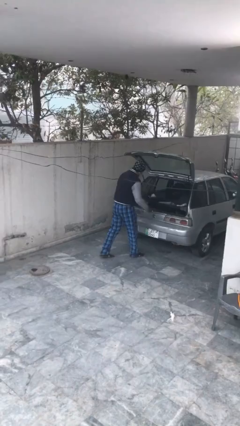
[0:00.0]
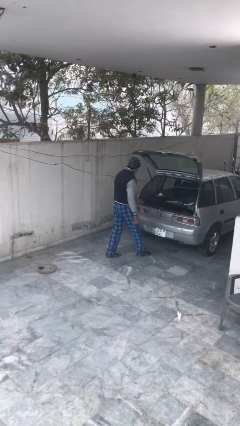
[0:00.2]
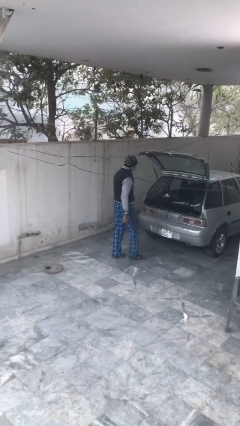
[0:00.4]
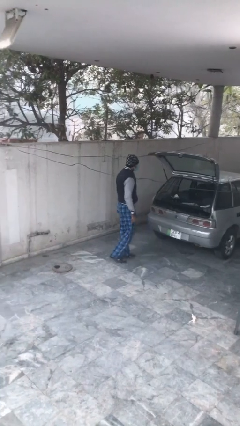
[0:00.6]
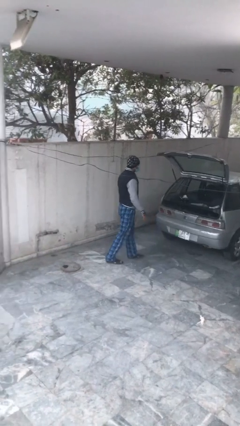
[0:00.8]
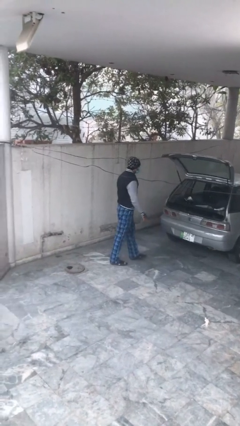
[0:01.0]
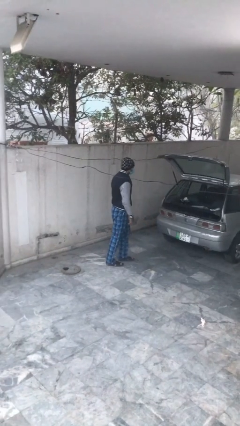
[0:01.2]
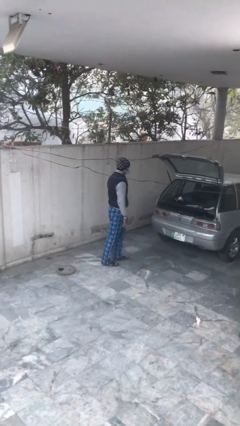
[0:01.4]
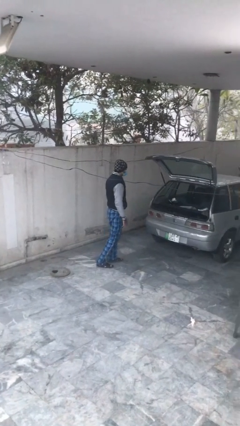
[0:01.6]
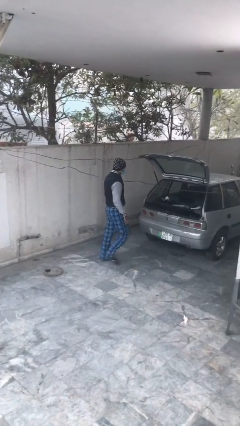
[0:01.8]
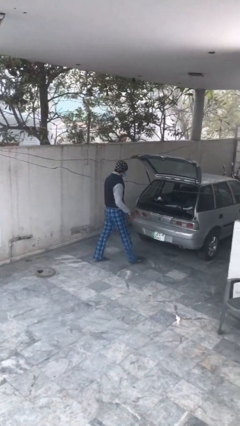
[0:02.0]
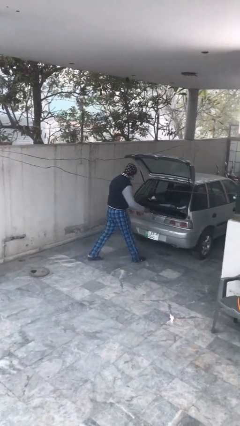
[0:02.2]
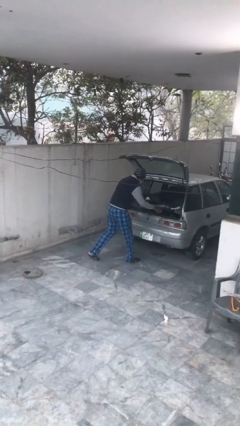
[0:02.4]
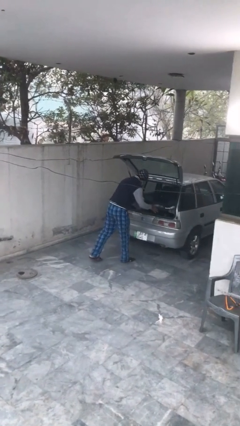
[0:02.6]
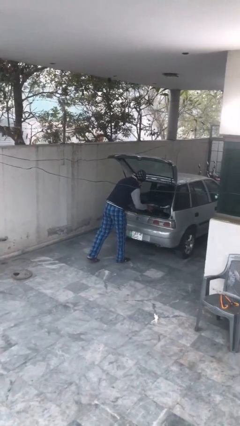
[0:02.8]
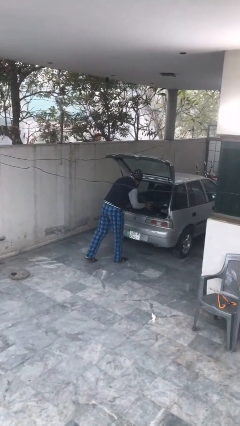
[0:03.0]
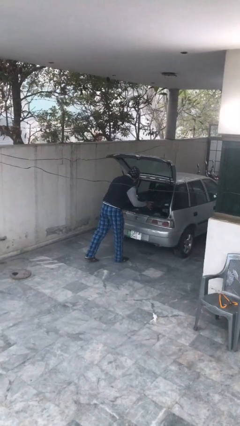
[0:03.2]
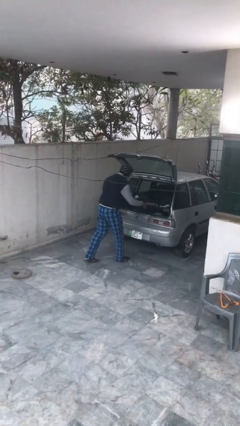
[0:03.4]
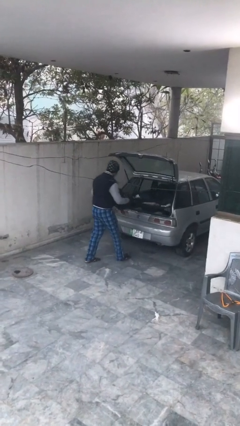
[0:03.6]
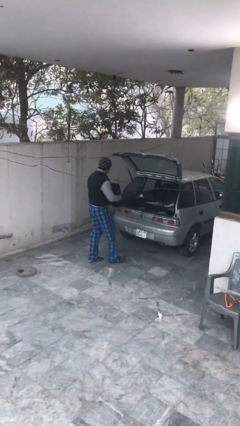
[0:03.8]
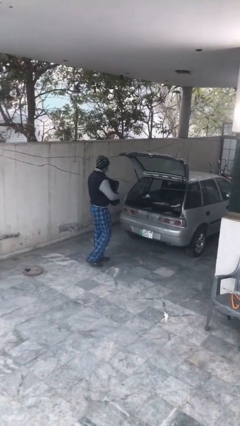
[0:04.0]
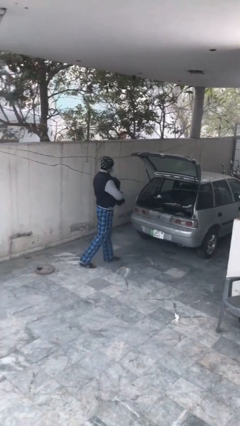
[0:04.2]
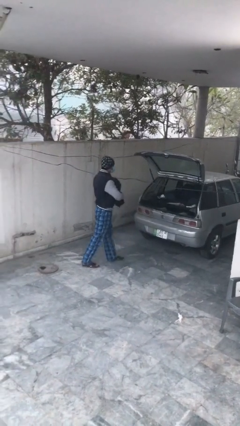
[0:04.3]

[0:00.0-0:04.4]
person unloads car

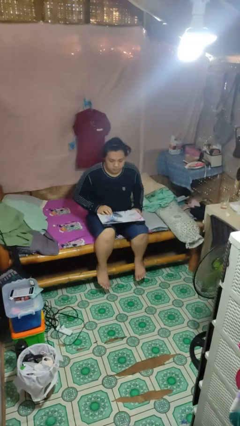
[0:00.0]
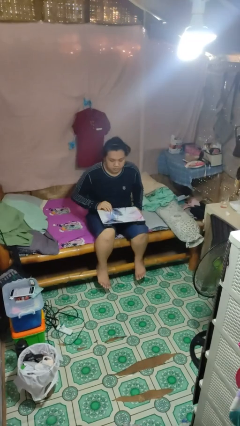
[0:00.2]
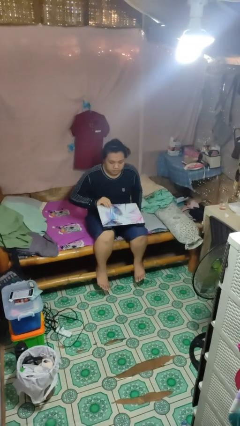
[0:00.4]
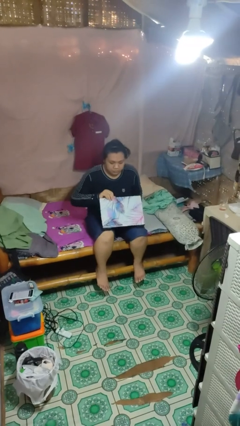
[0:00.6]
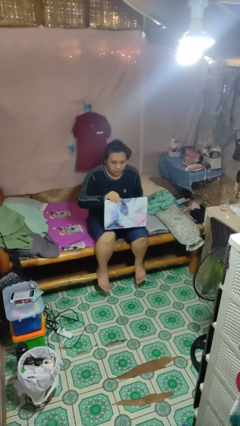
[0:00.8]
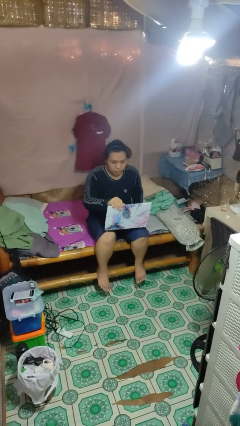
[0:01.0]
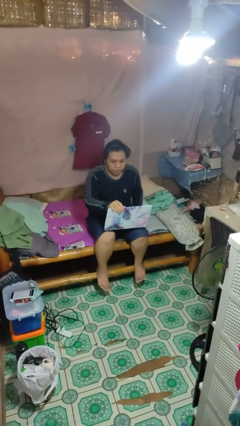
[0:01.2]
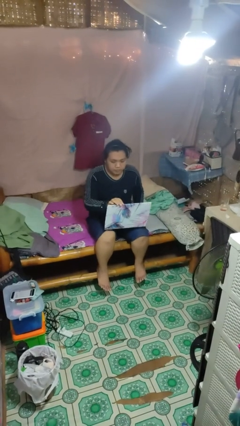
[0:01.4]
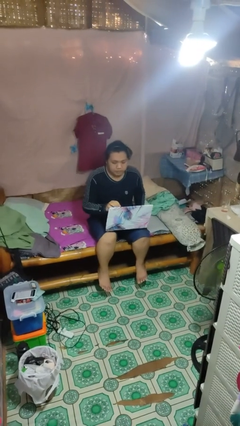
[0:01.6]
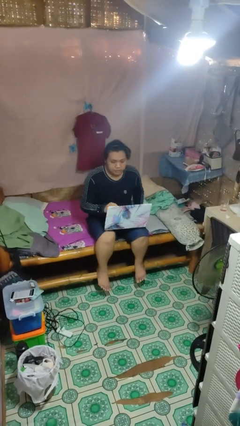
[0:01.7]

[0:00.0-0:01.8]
person opens laptop

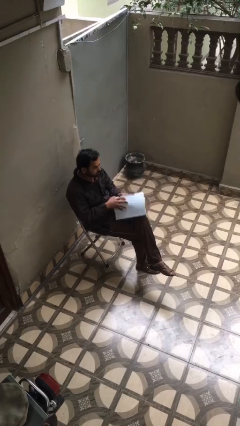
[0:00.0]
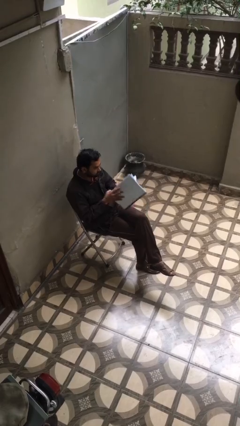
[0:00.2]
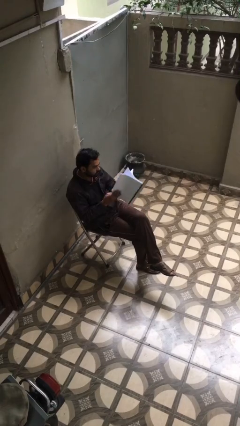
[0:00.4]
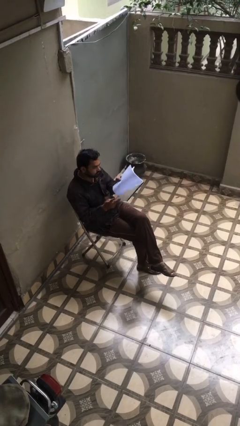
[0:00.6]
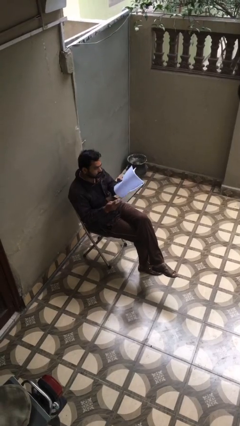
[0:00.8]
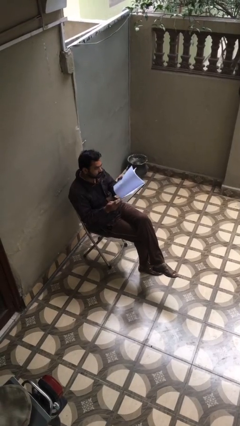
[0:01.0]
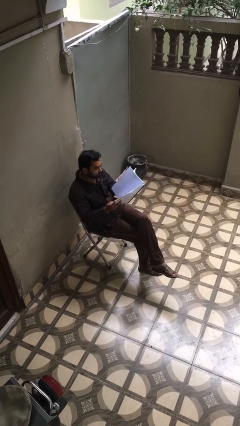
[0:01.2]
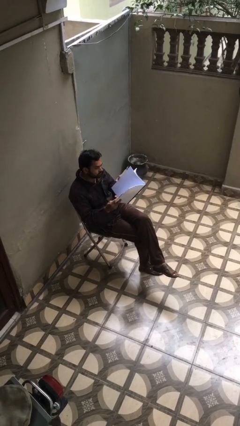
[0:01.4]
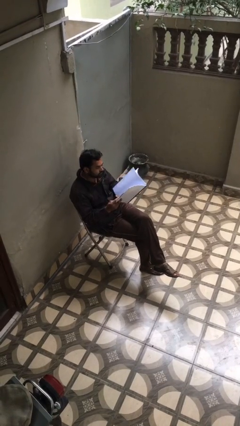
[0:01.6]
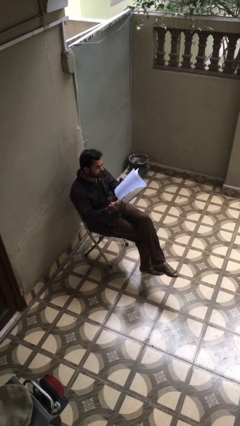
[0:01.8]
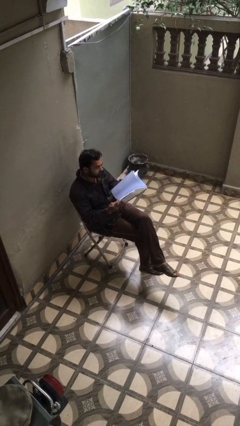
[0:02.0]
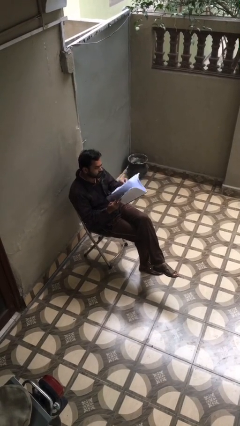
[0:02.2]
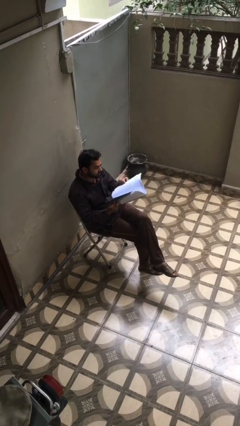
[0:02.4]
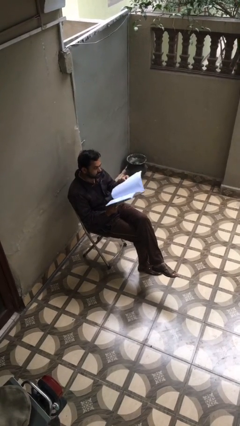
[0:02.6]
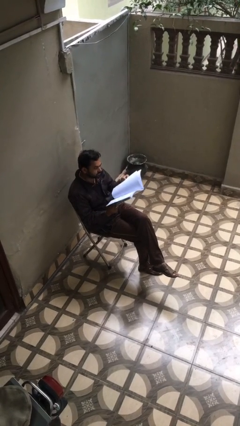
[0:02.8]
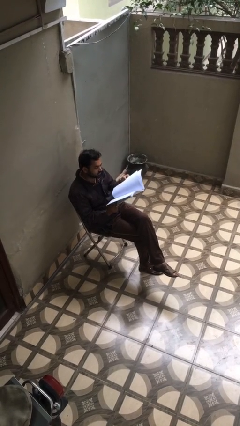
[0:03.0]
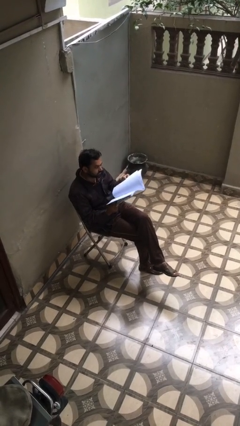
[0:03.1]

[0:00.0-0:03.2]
person reads document

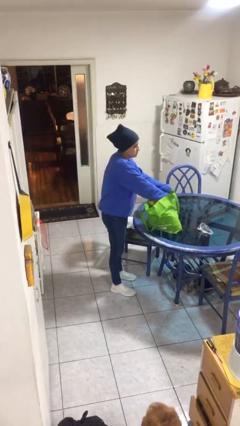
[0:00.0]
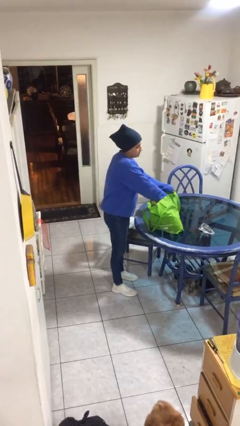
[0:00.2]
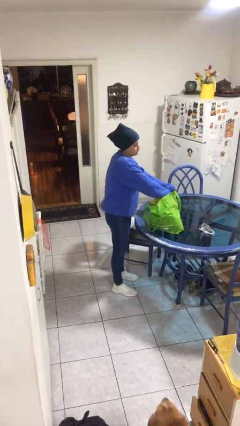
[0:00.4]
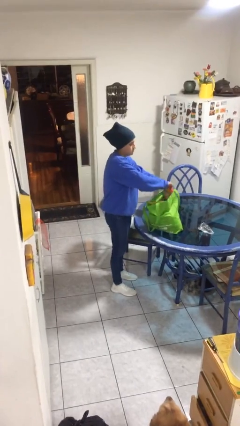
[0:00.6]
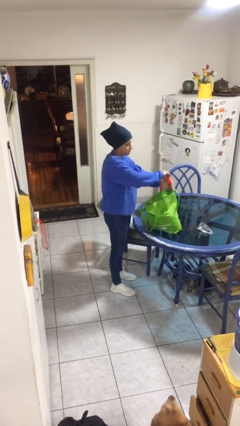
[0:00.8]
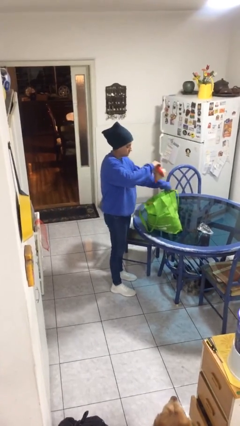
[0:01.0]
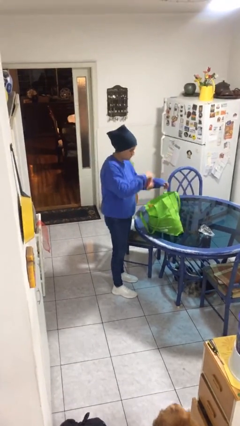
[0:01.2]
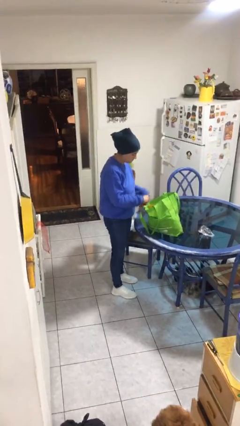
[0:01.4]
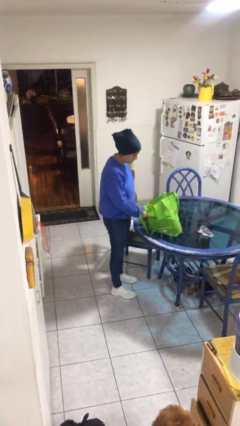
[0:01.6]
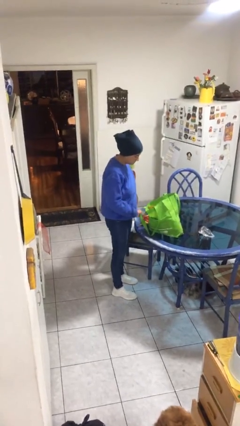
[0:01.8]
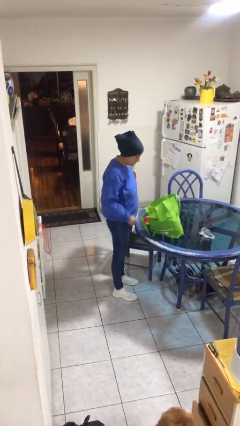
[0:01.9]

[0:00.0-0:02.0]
person takes object from bag

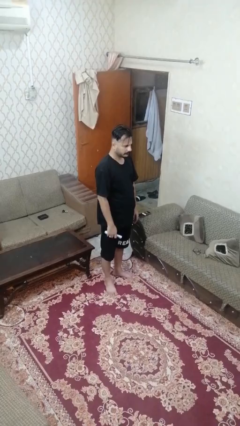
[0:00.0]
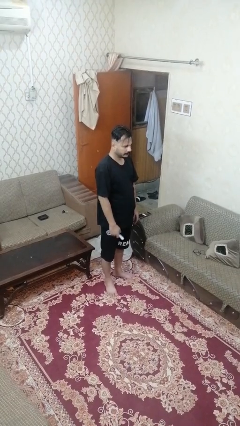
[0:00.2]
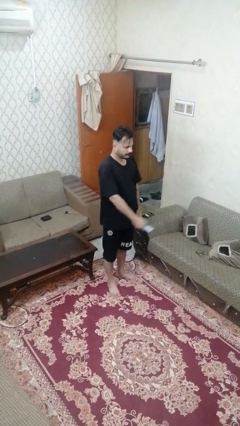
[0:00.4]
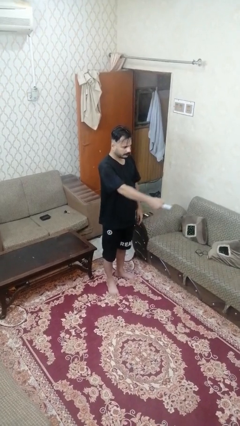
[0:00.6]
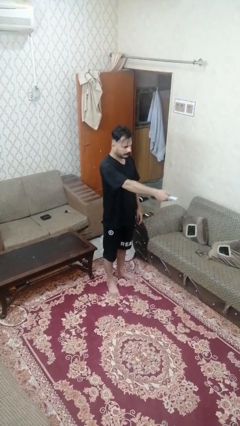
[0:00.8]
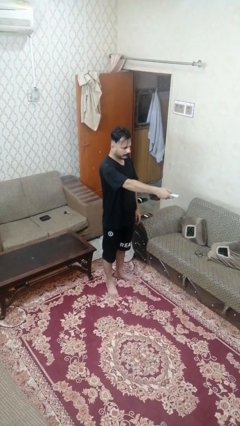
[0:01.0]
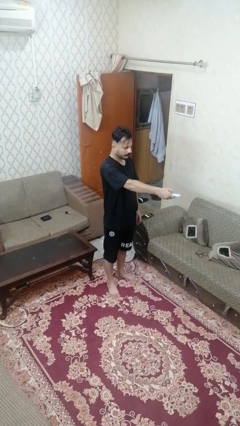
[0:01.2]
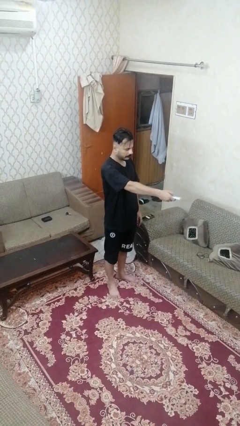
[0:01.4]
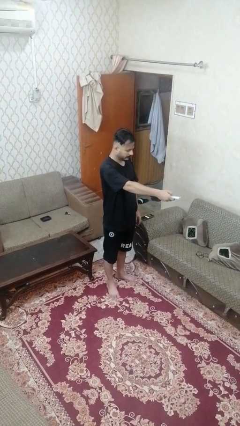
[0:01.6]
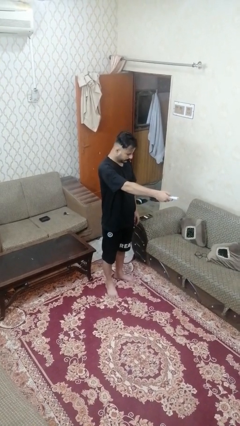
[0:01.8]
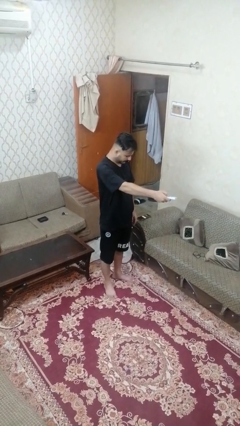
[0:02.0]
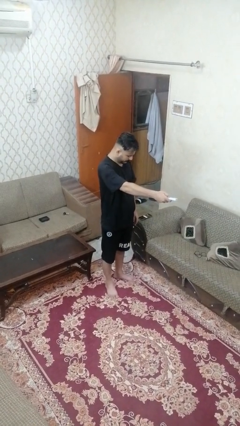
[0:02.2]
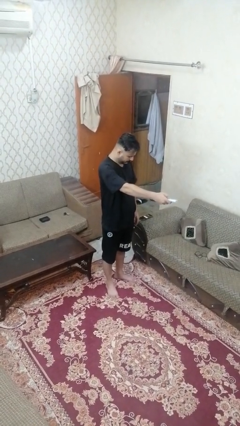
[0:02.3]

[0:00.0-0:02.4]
person uses television remote

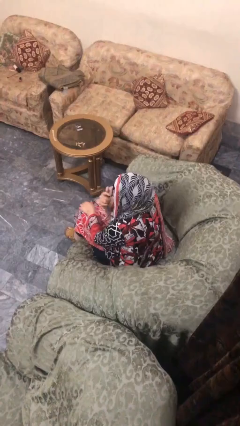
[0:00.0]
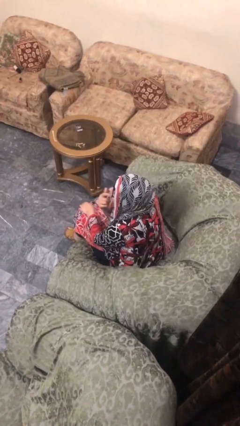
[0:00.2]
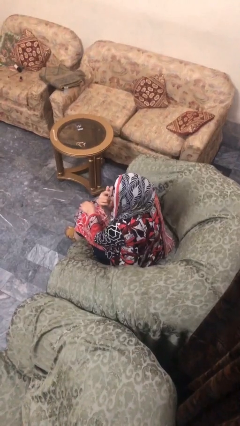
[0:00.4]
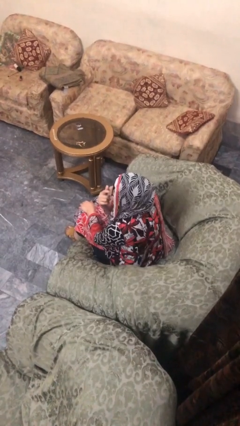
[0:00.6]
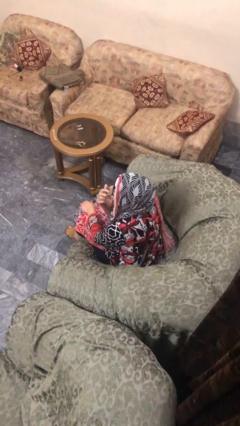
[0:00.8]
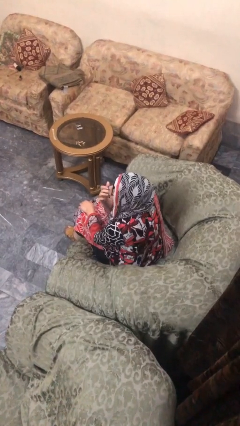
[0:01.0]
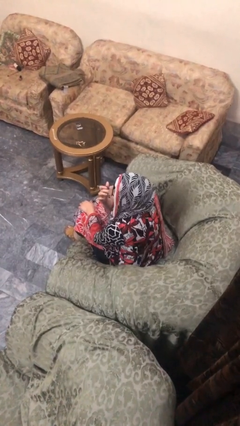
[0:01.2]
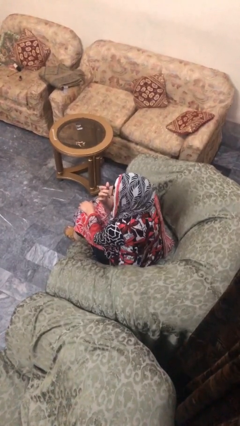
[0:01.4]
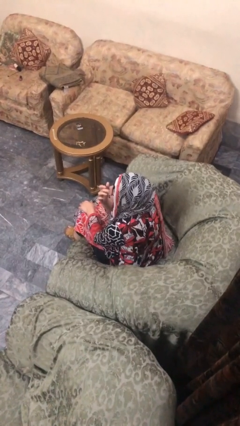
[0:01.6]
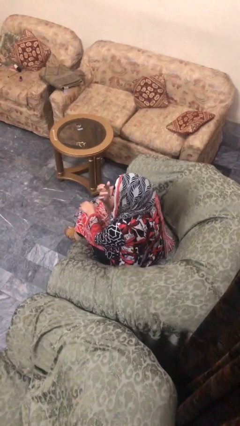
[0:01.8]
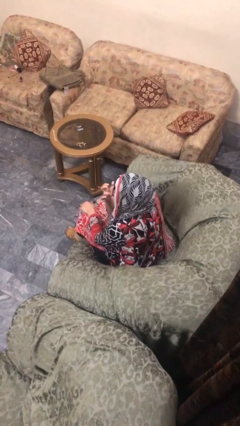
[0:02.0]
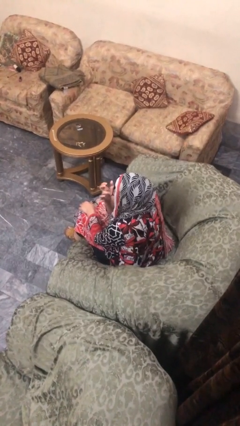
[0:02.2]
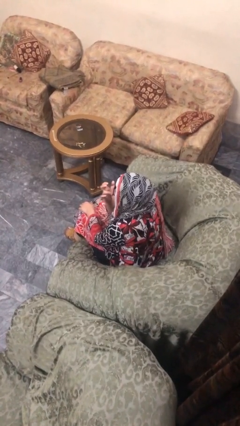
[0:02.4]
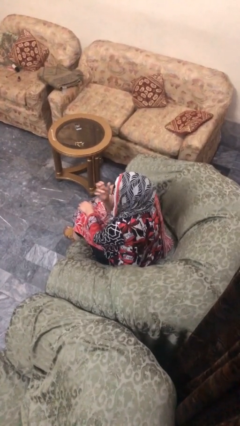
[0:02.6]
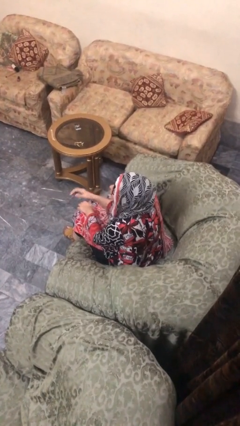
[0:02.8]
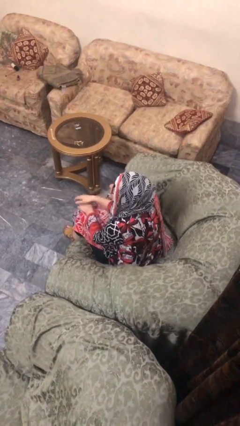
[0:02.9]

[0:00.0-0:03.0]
person licks fingers

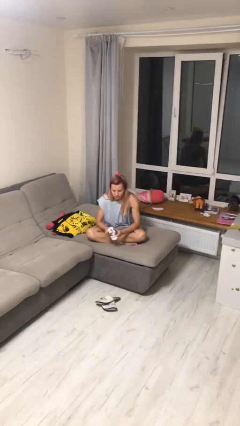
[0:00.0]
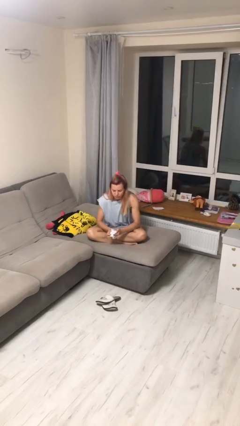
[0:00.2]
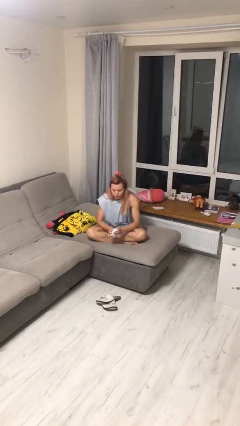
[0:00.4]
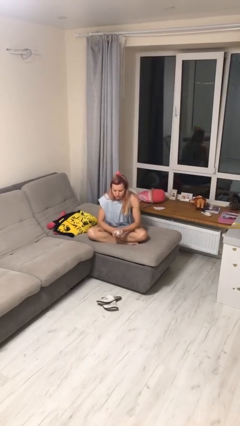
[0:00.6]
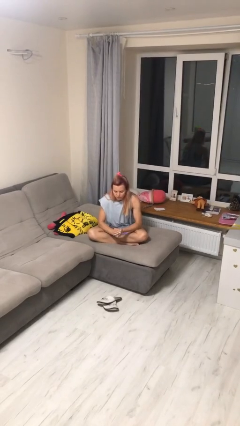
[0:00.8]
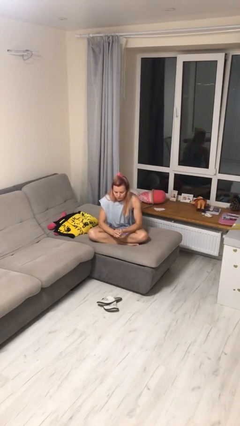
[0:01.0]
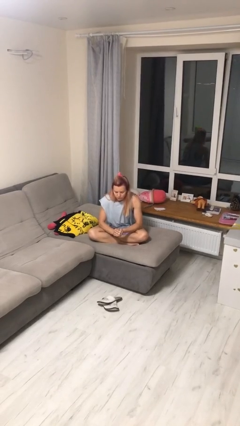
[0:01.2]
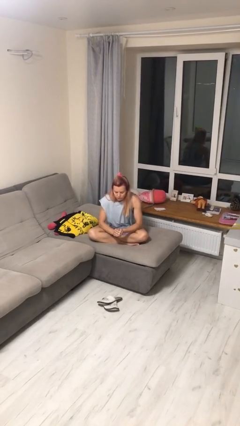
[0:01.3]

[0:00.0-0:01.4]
person crumples paper
